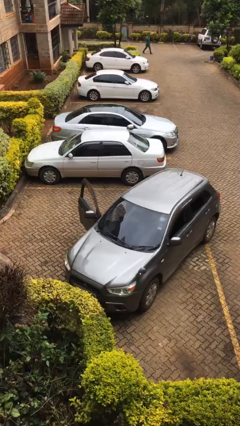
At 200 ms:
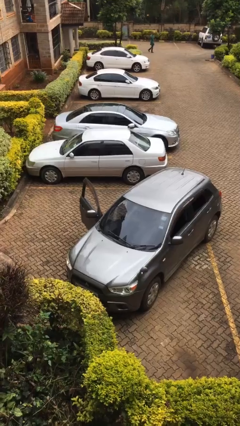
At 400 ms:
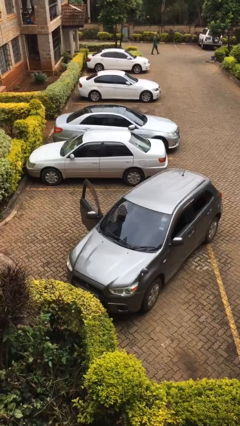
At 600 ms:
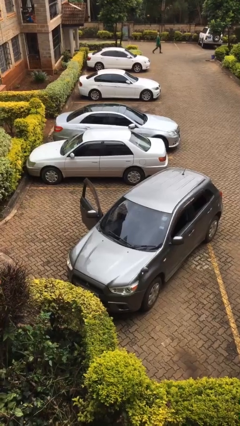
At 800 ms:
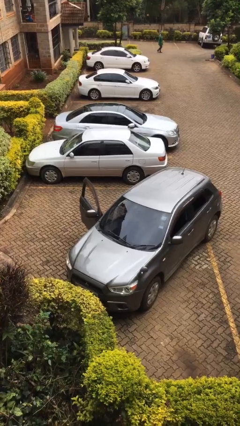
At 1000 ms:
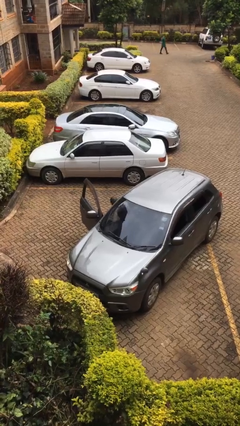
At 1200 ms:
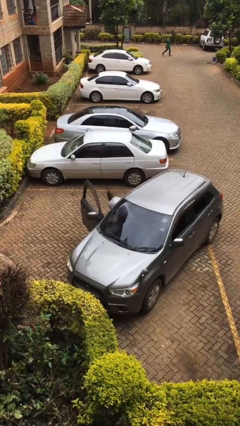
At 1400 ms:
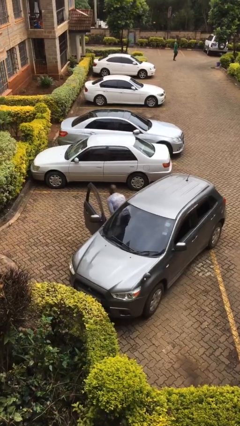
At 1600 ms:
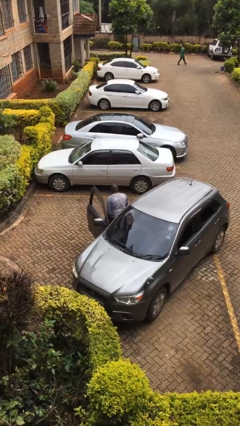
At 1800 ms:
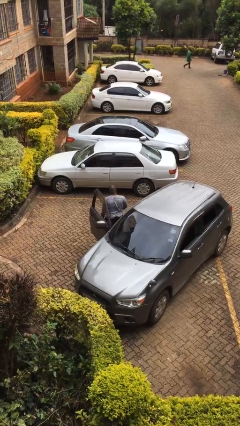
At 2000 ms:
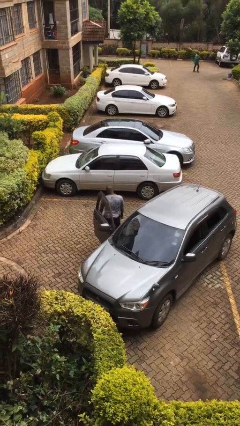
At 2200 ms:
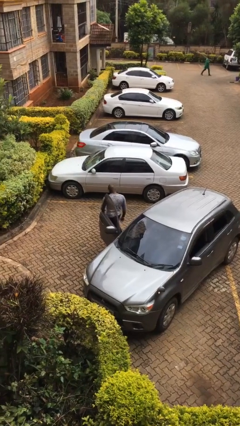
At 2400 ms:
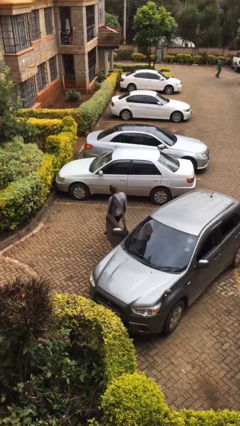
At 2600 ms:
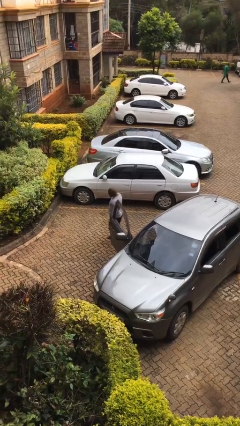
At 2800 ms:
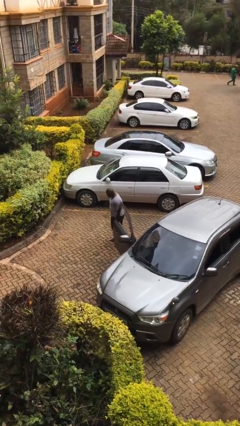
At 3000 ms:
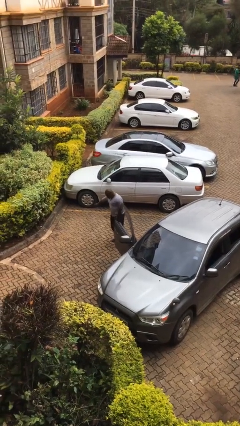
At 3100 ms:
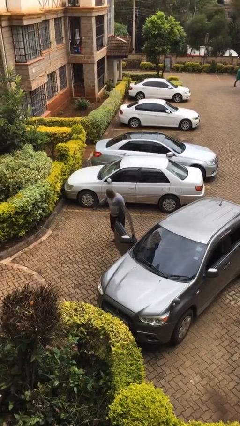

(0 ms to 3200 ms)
person exits car

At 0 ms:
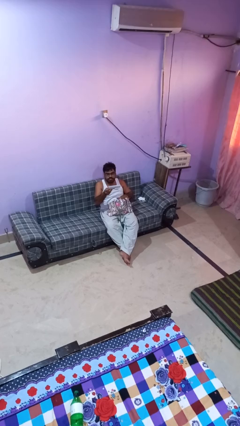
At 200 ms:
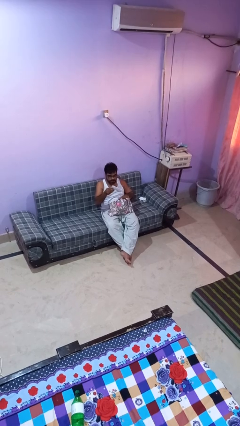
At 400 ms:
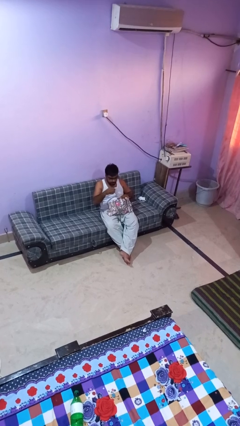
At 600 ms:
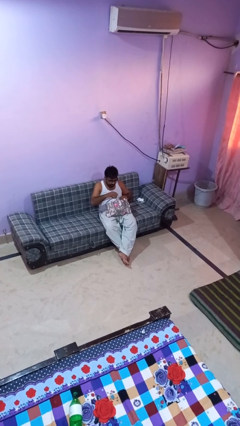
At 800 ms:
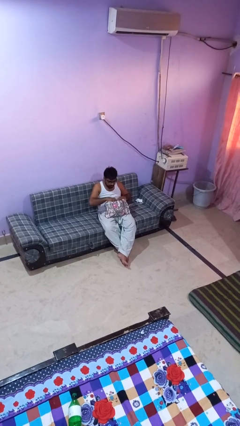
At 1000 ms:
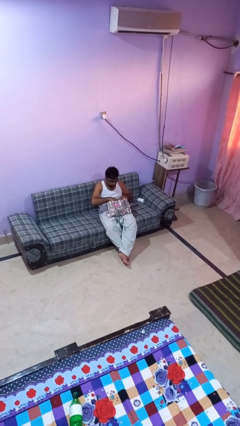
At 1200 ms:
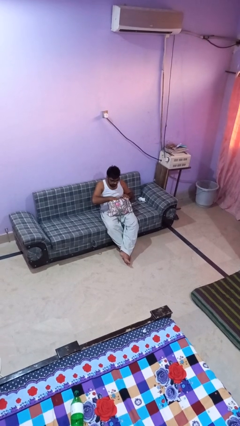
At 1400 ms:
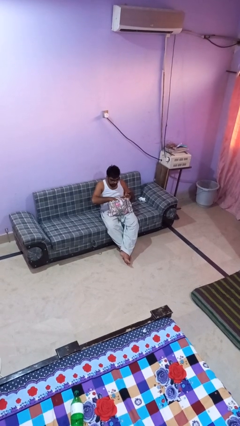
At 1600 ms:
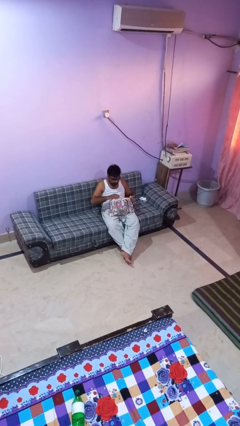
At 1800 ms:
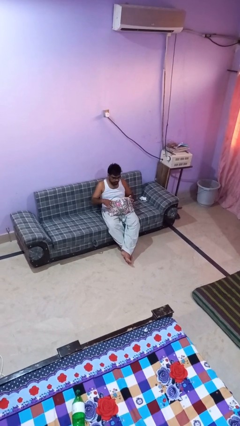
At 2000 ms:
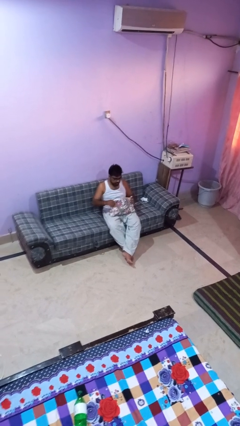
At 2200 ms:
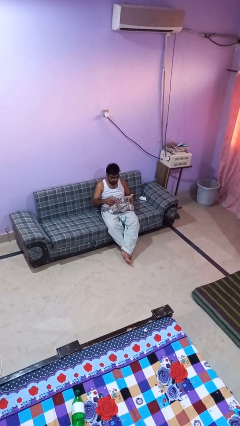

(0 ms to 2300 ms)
person puts object into purse

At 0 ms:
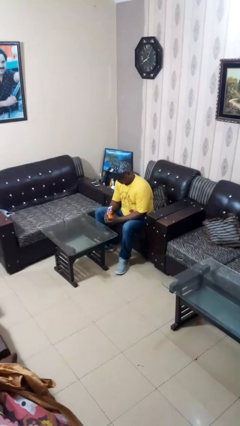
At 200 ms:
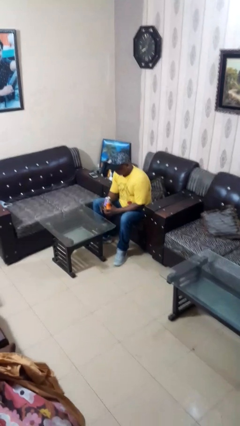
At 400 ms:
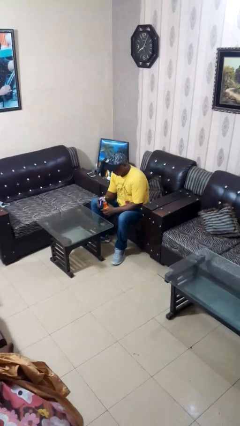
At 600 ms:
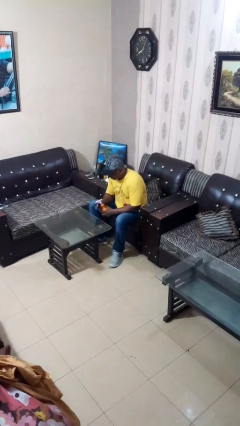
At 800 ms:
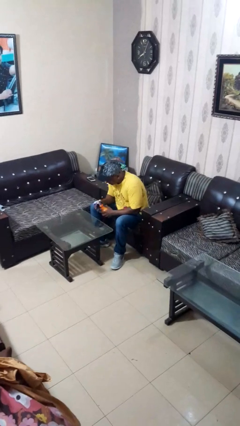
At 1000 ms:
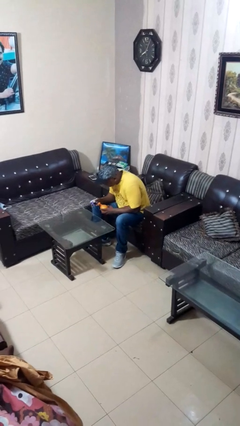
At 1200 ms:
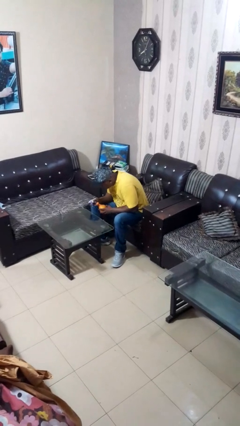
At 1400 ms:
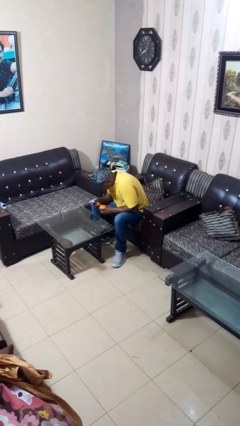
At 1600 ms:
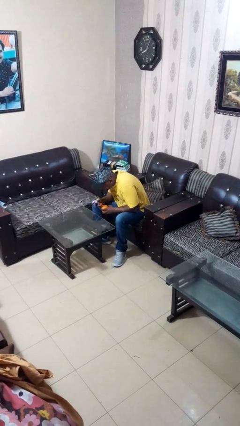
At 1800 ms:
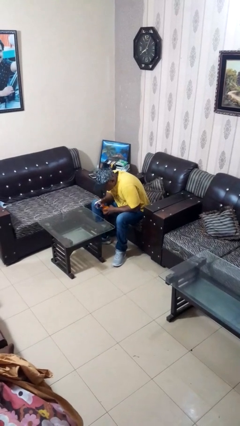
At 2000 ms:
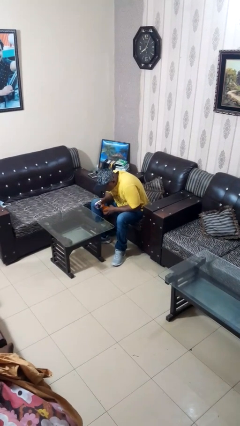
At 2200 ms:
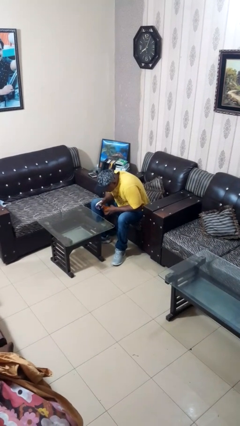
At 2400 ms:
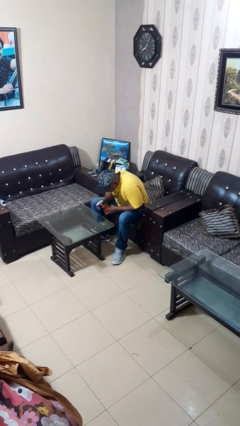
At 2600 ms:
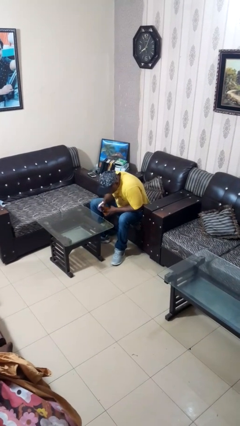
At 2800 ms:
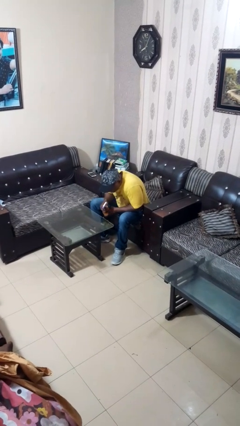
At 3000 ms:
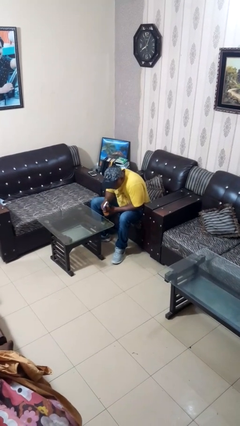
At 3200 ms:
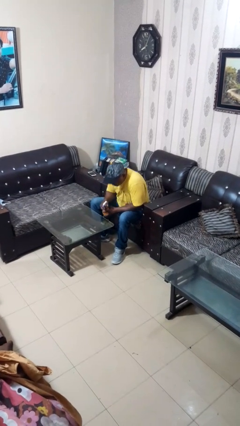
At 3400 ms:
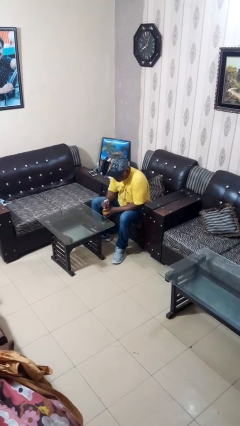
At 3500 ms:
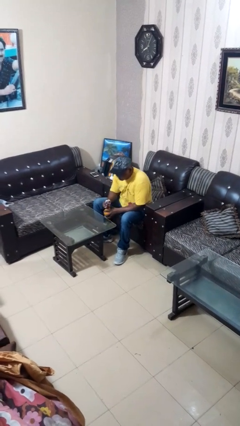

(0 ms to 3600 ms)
person sprays from bottle

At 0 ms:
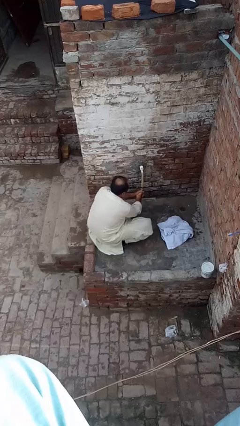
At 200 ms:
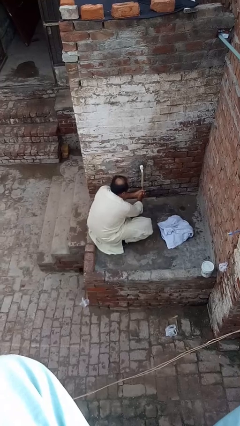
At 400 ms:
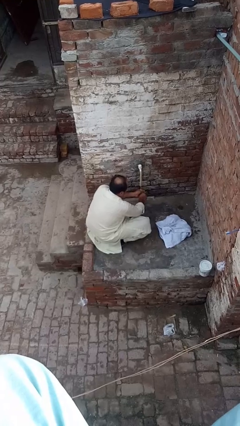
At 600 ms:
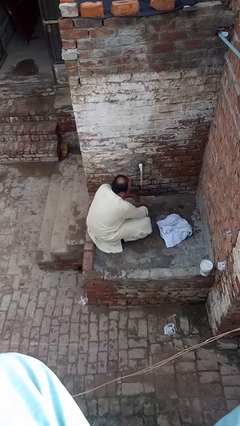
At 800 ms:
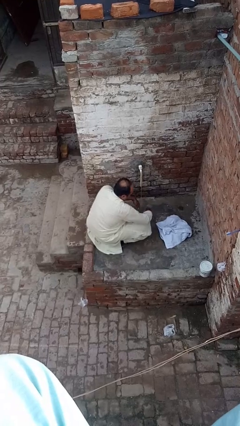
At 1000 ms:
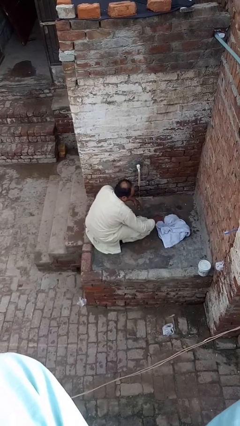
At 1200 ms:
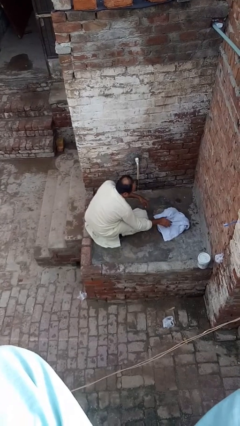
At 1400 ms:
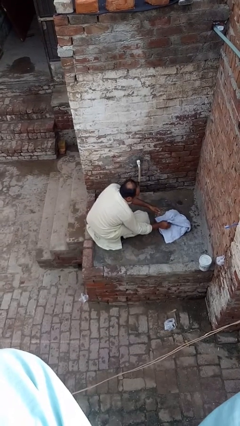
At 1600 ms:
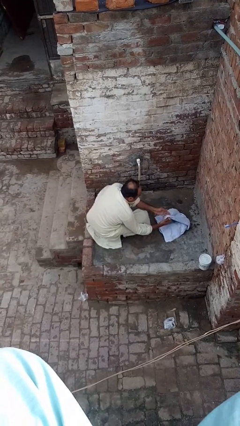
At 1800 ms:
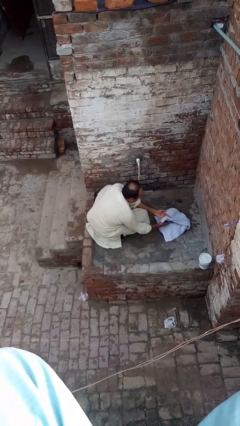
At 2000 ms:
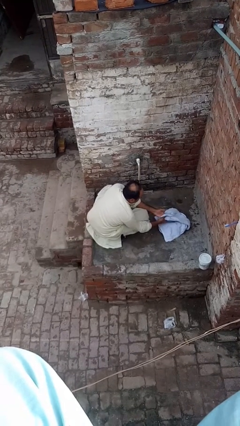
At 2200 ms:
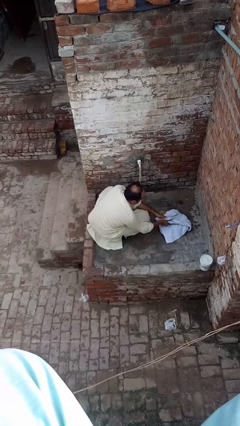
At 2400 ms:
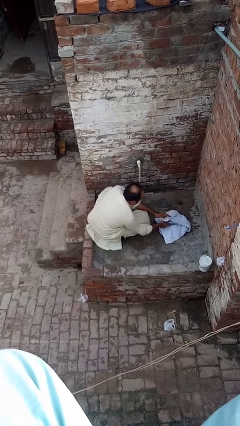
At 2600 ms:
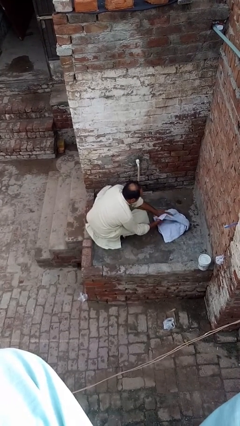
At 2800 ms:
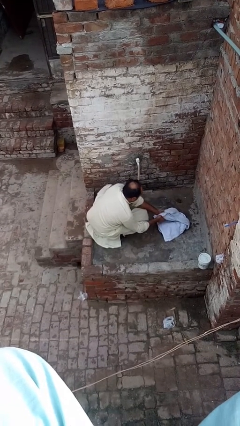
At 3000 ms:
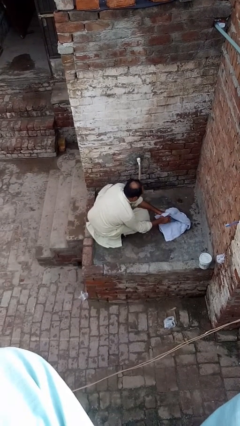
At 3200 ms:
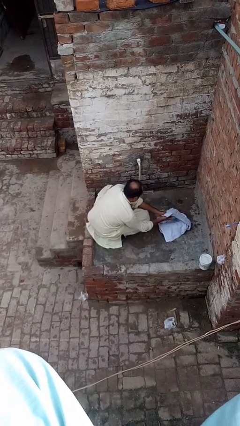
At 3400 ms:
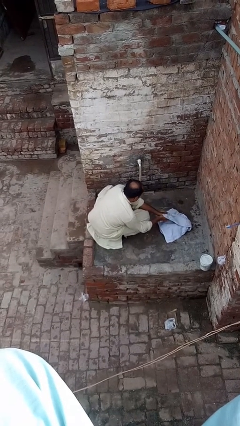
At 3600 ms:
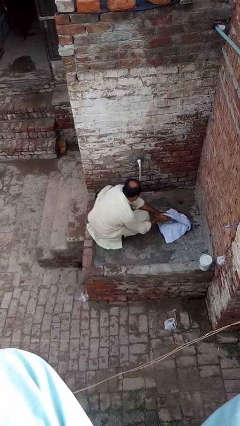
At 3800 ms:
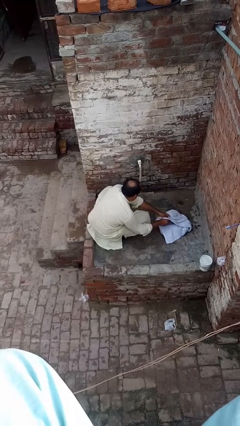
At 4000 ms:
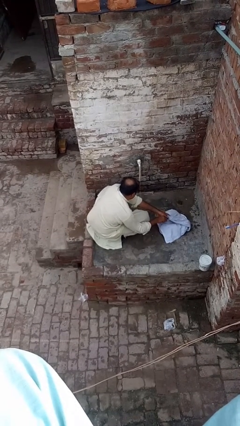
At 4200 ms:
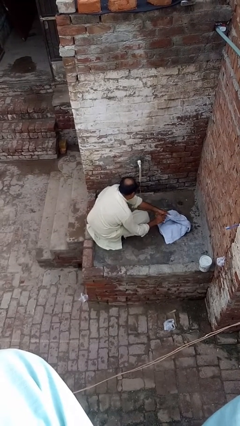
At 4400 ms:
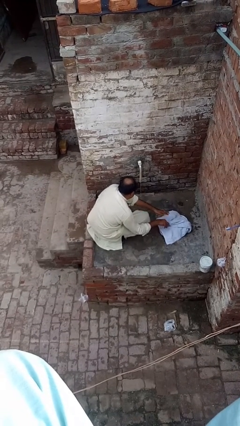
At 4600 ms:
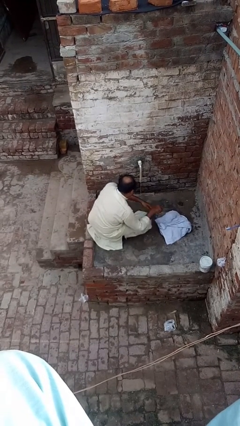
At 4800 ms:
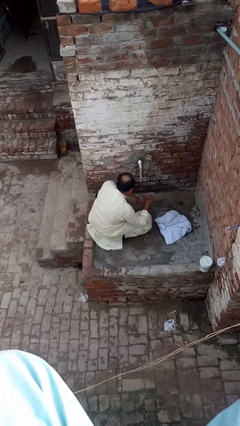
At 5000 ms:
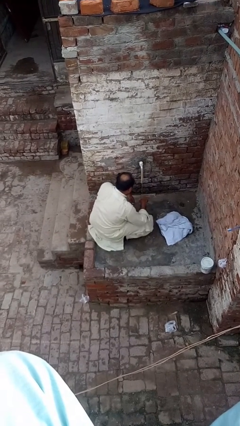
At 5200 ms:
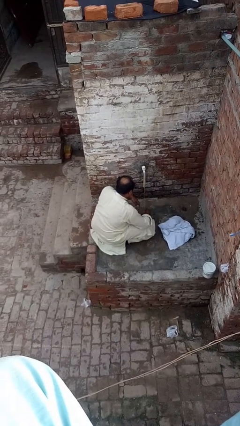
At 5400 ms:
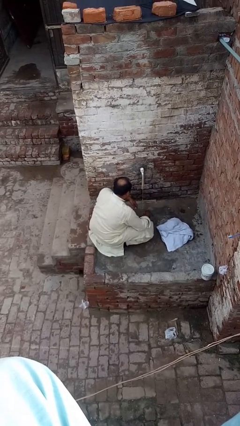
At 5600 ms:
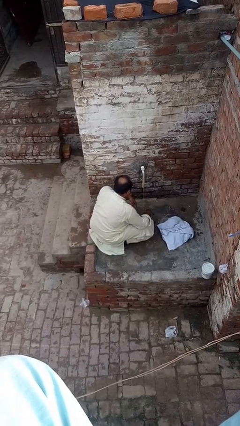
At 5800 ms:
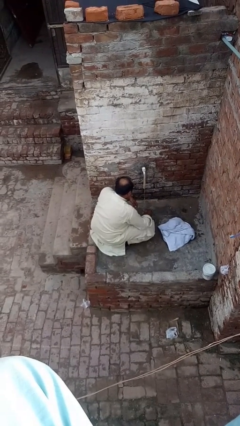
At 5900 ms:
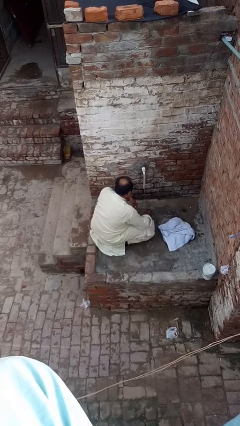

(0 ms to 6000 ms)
person dries hands with towel

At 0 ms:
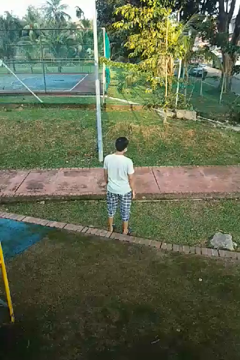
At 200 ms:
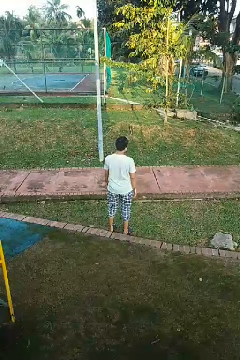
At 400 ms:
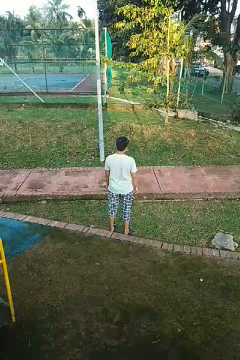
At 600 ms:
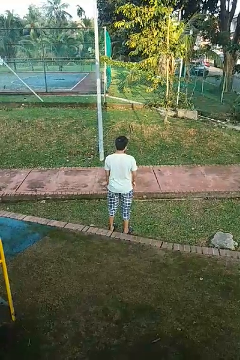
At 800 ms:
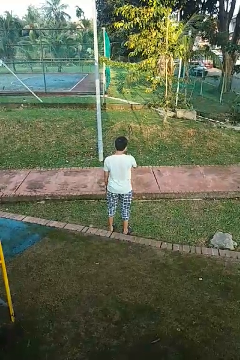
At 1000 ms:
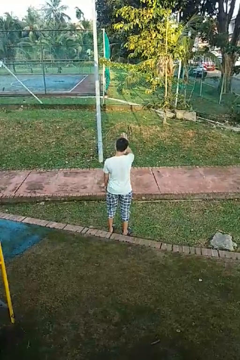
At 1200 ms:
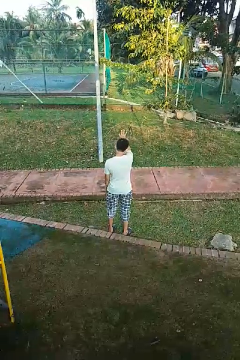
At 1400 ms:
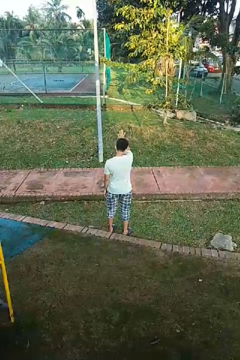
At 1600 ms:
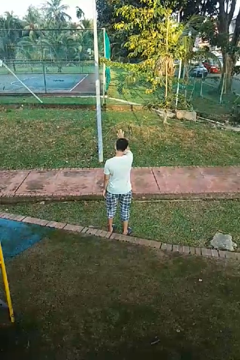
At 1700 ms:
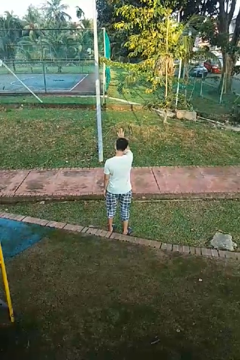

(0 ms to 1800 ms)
person gestures stop

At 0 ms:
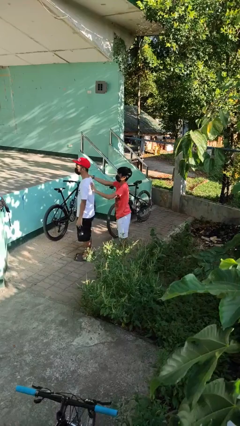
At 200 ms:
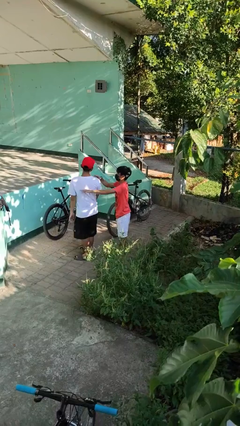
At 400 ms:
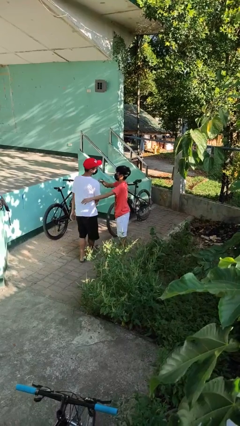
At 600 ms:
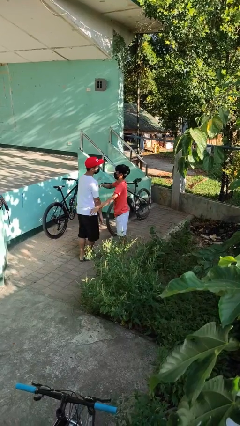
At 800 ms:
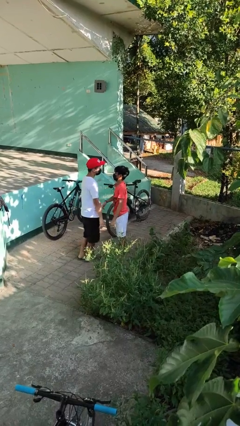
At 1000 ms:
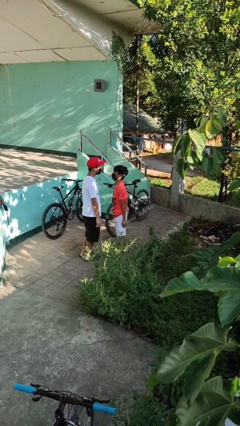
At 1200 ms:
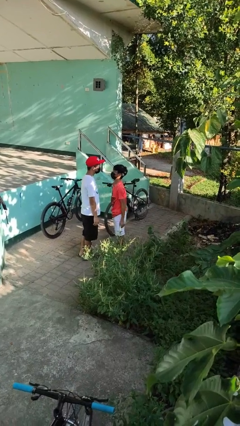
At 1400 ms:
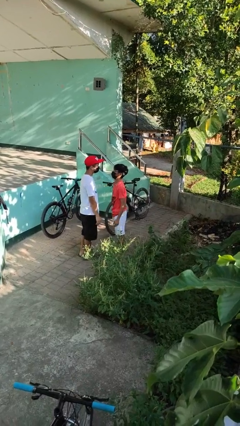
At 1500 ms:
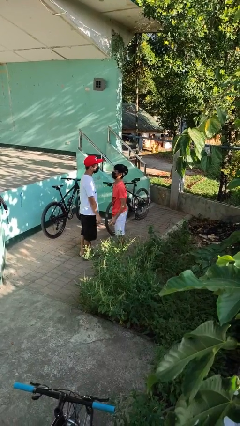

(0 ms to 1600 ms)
person spins person around
